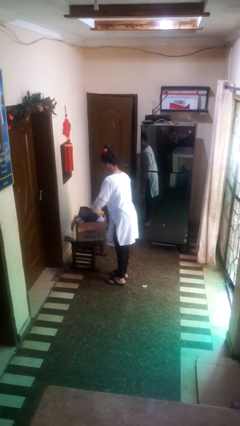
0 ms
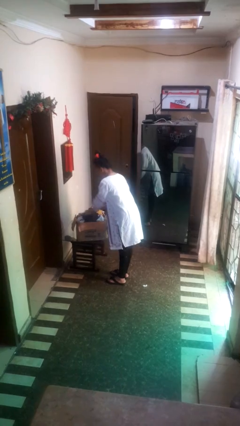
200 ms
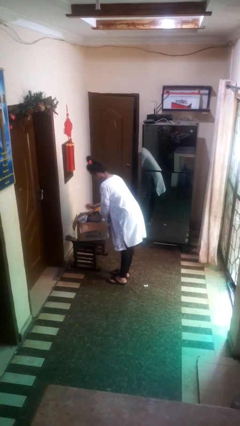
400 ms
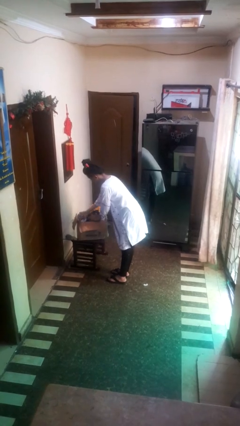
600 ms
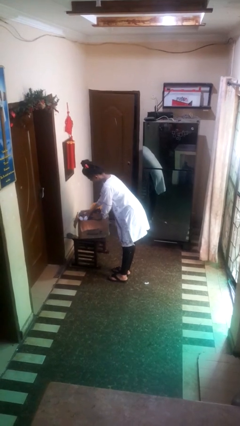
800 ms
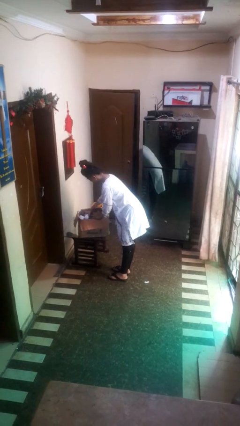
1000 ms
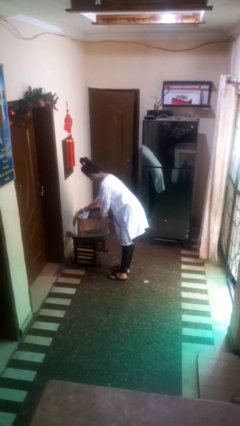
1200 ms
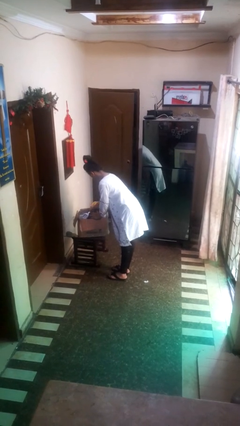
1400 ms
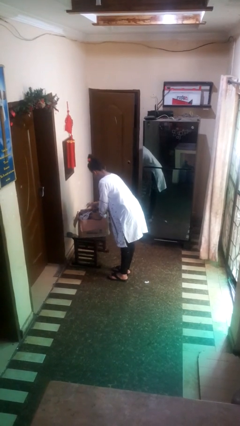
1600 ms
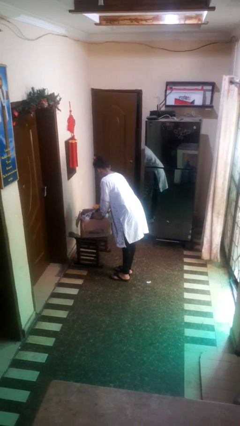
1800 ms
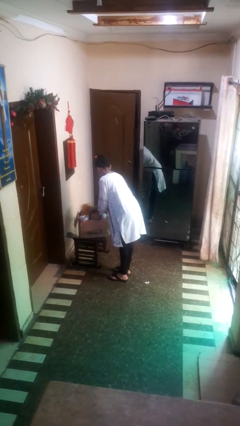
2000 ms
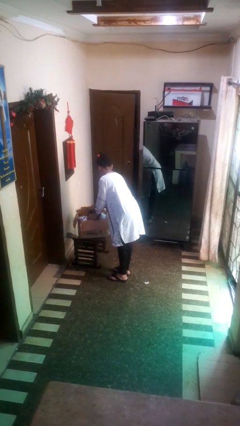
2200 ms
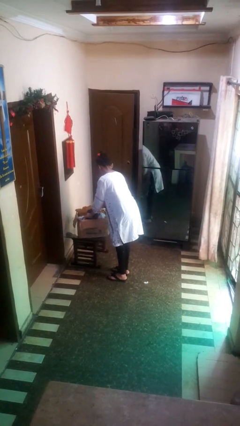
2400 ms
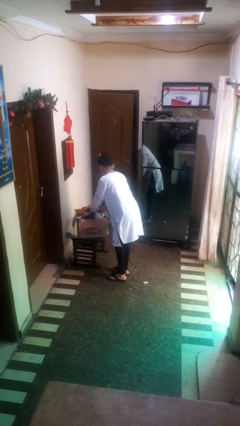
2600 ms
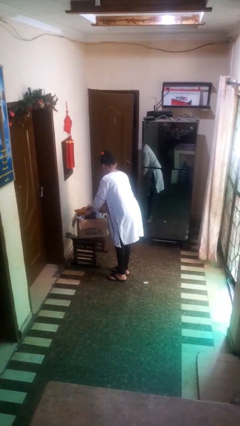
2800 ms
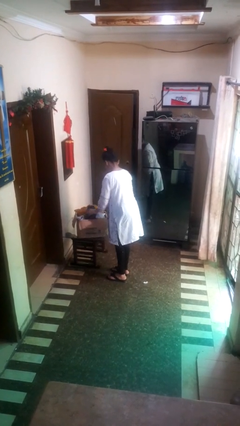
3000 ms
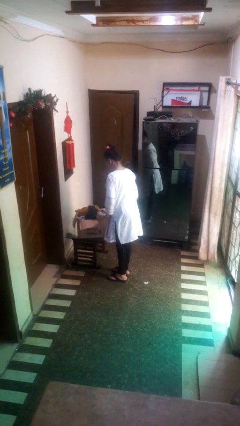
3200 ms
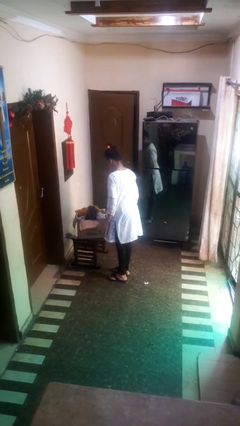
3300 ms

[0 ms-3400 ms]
person searches in box

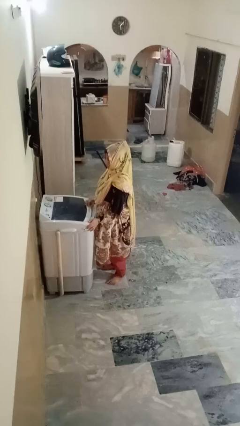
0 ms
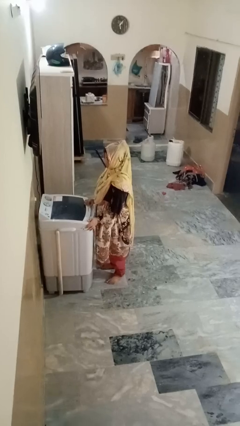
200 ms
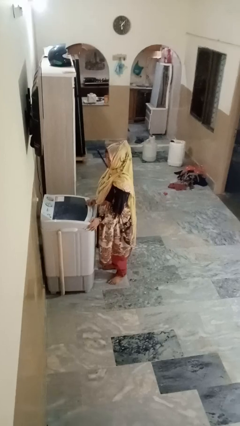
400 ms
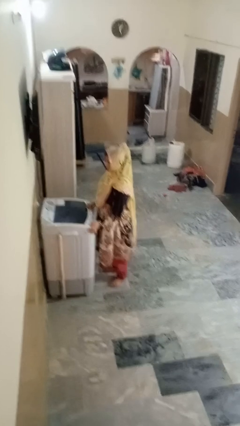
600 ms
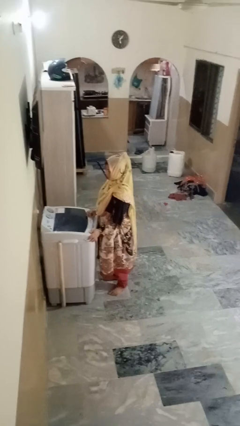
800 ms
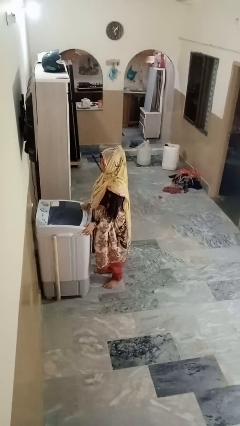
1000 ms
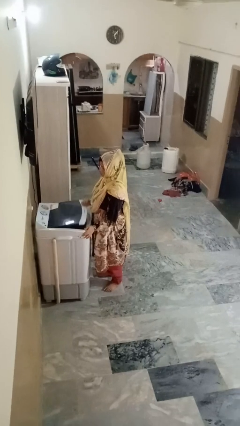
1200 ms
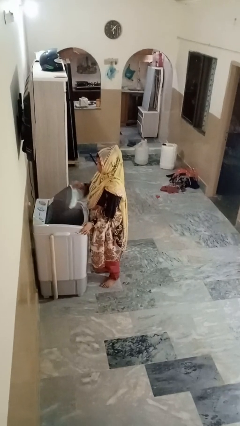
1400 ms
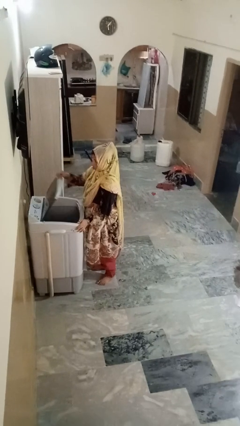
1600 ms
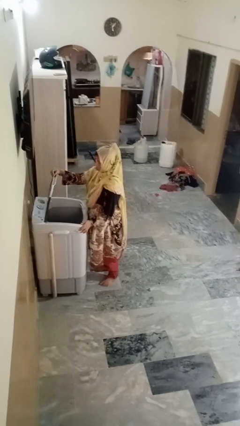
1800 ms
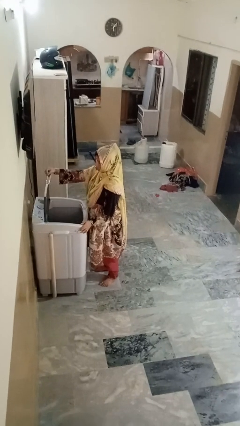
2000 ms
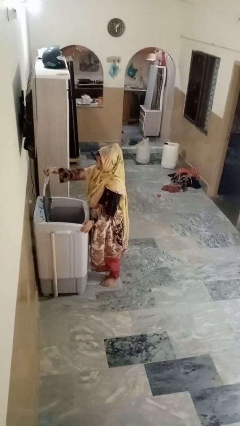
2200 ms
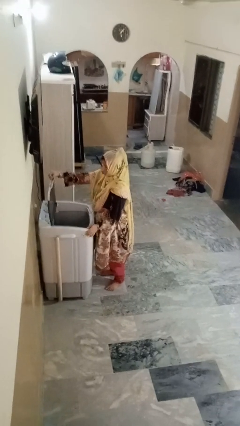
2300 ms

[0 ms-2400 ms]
person closes clothes washer

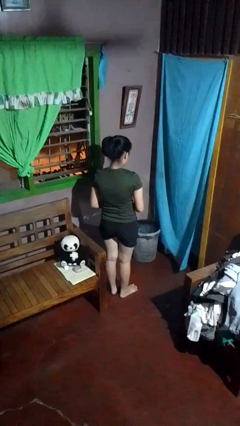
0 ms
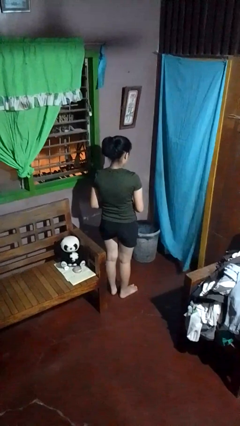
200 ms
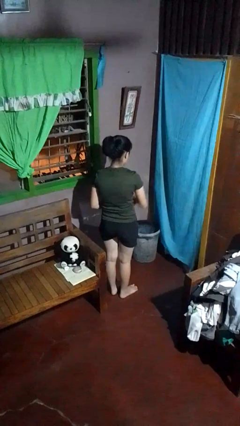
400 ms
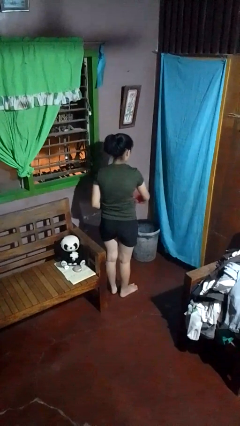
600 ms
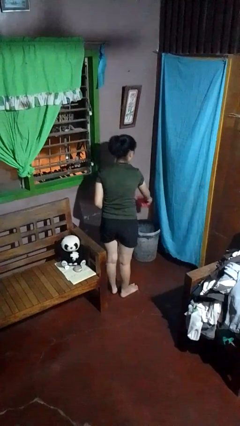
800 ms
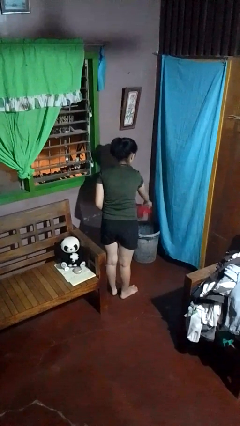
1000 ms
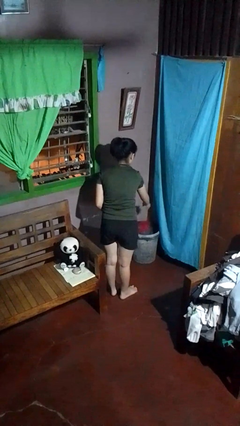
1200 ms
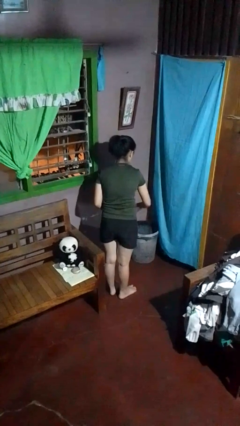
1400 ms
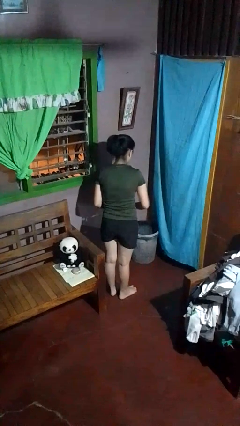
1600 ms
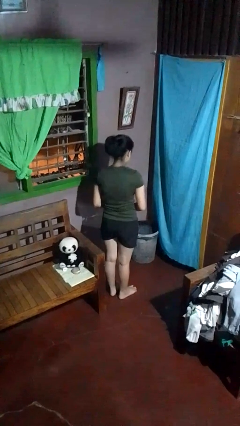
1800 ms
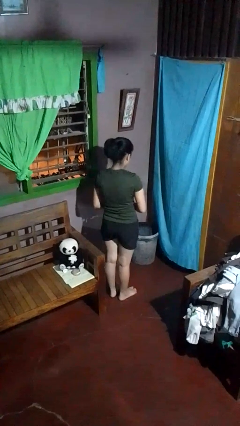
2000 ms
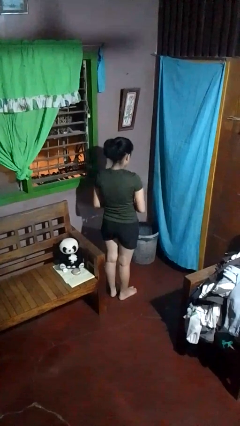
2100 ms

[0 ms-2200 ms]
person discards trash

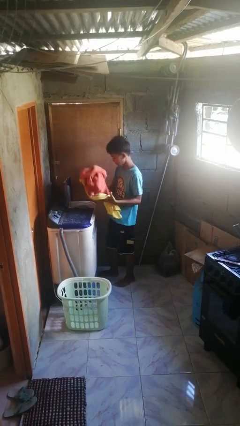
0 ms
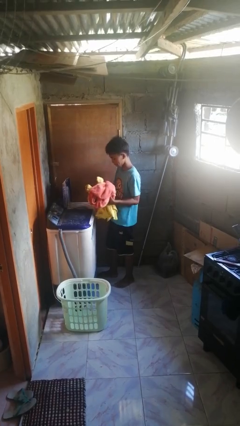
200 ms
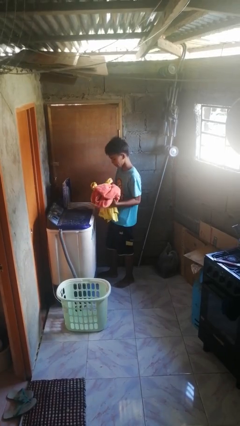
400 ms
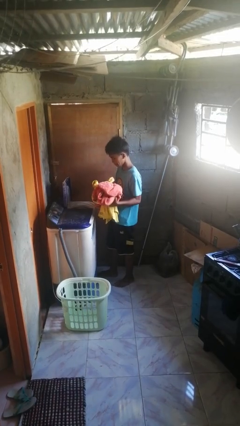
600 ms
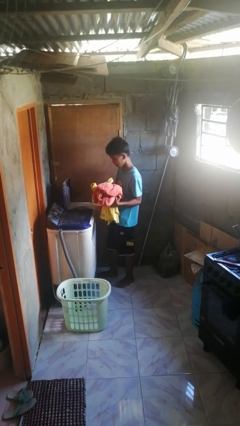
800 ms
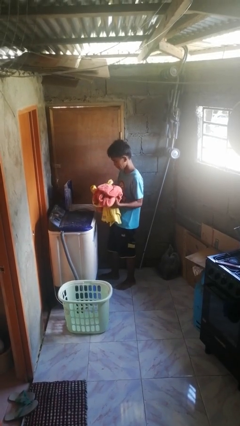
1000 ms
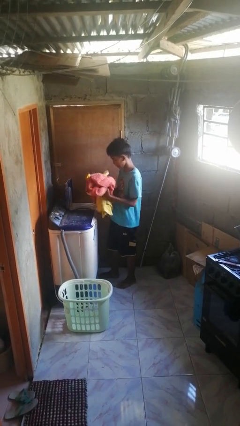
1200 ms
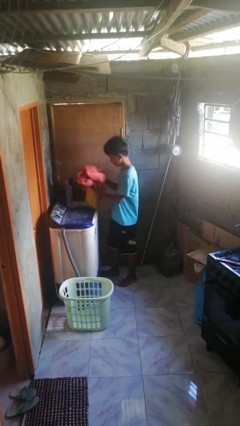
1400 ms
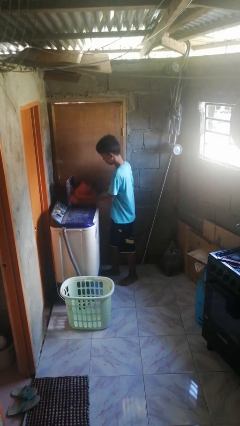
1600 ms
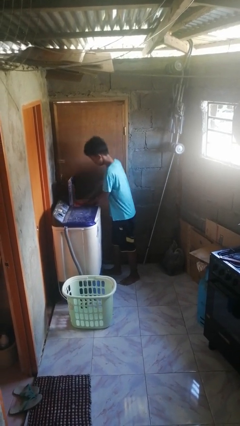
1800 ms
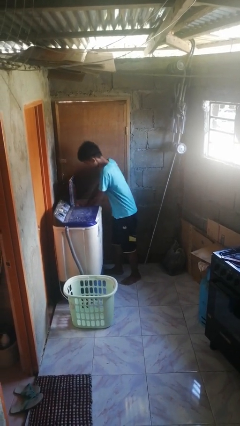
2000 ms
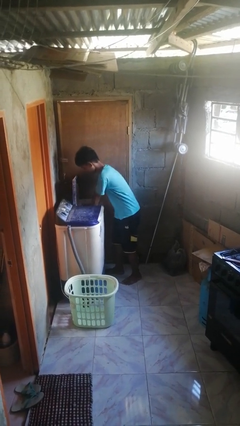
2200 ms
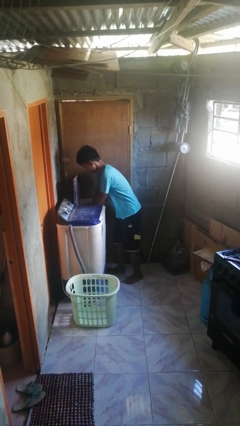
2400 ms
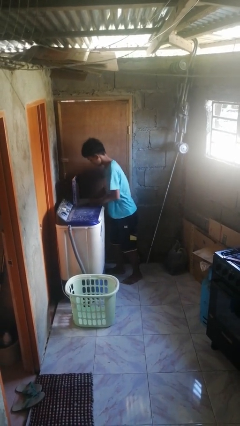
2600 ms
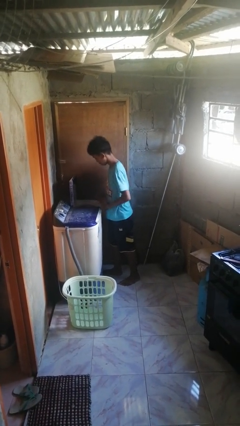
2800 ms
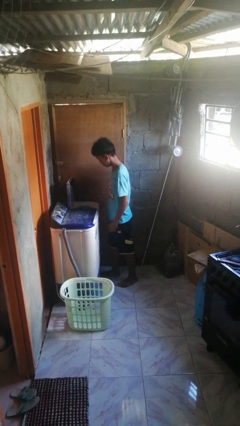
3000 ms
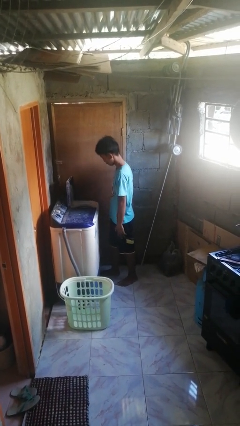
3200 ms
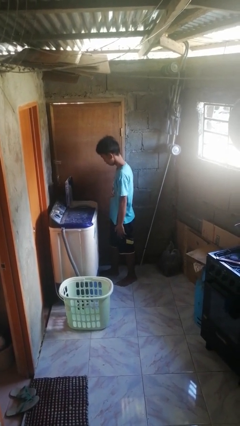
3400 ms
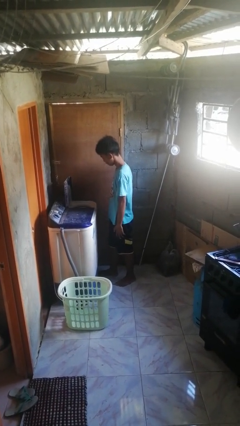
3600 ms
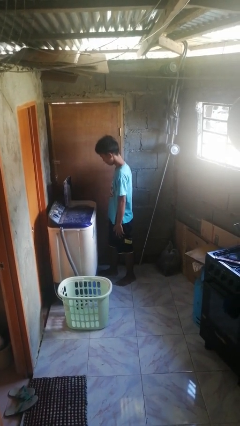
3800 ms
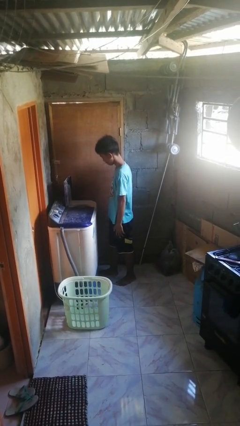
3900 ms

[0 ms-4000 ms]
person loads dryer

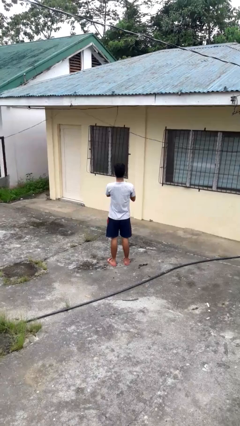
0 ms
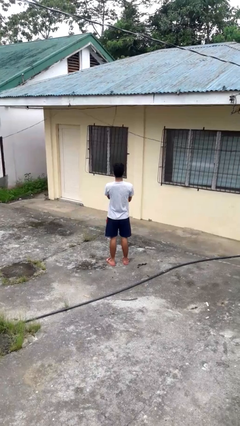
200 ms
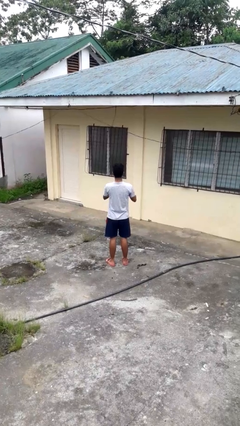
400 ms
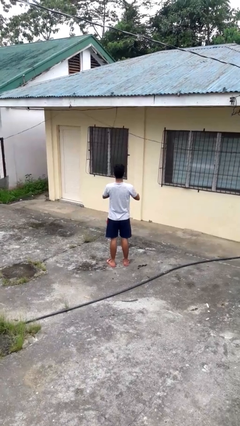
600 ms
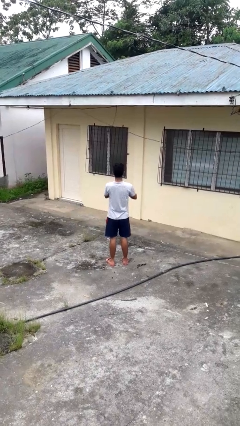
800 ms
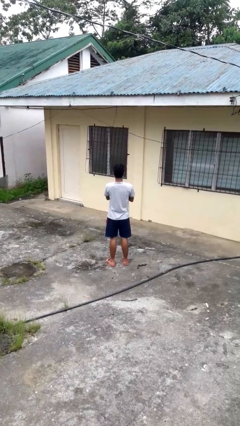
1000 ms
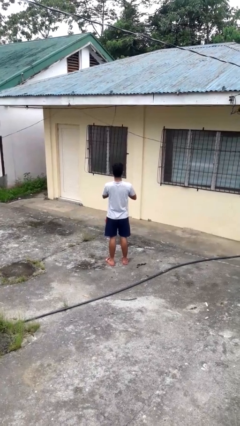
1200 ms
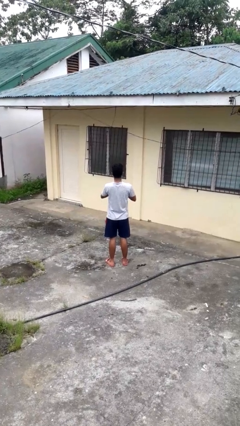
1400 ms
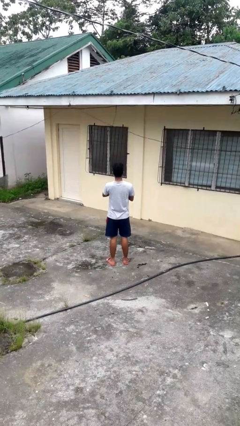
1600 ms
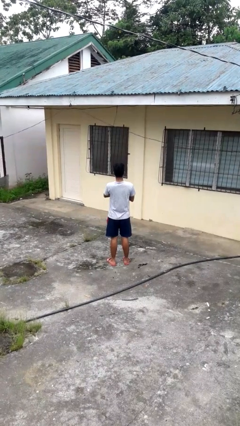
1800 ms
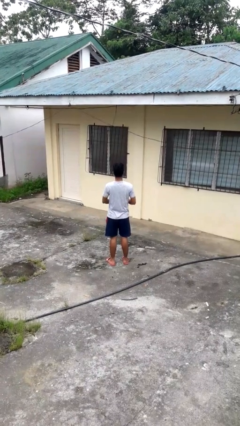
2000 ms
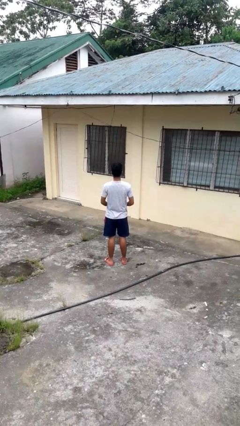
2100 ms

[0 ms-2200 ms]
person cracks knuckles

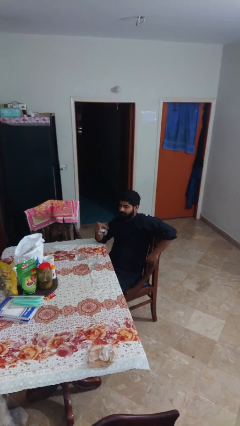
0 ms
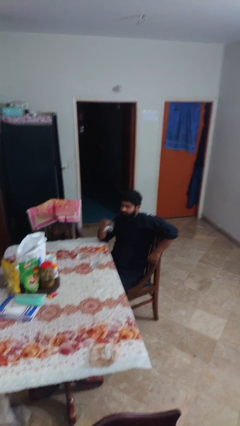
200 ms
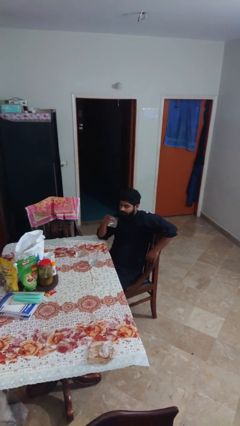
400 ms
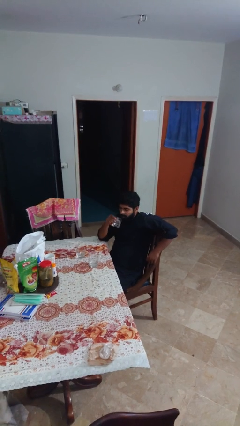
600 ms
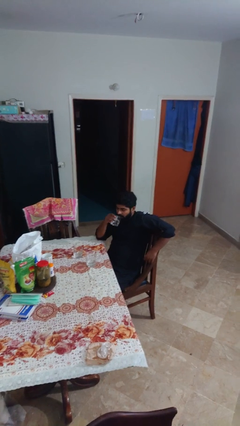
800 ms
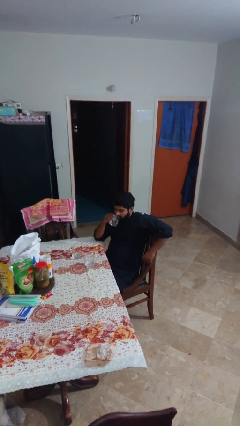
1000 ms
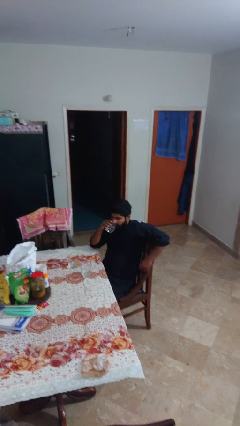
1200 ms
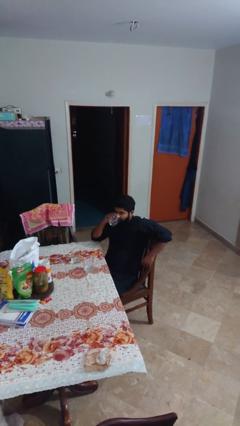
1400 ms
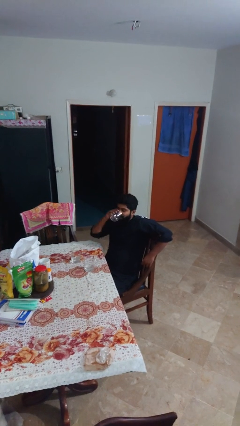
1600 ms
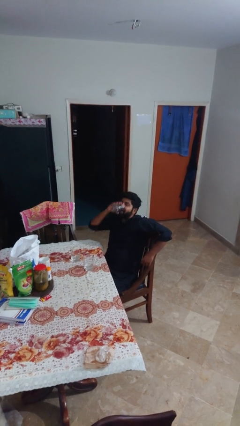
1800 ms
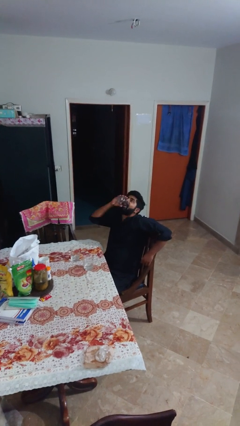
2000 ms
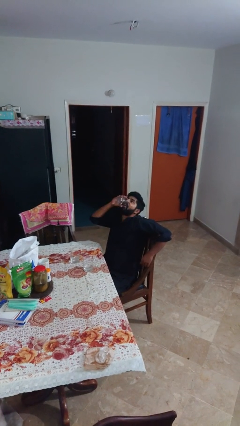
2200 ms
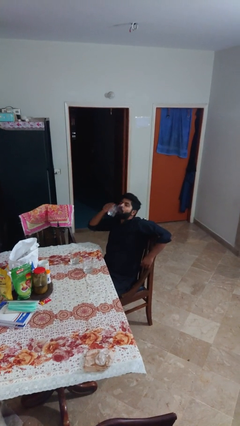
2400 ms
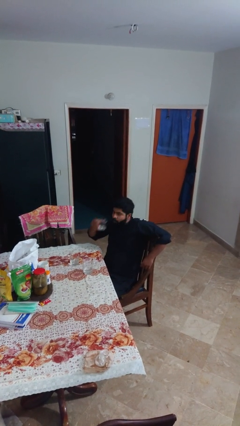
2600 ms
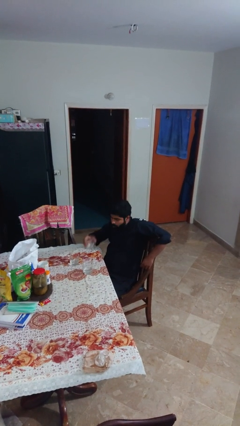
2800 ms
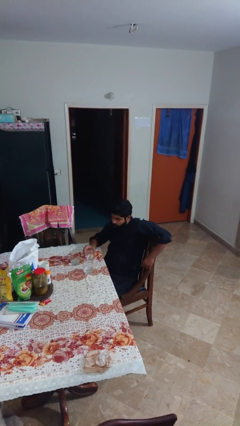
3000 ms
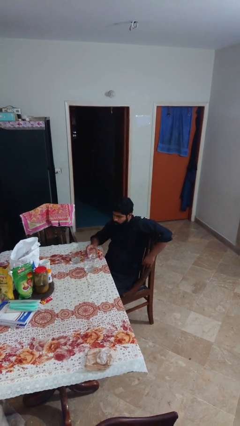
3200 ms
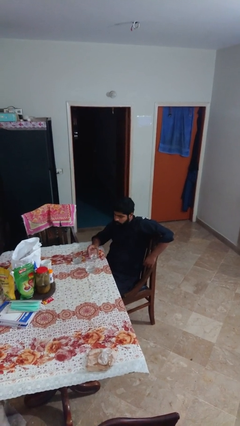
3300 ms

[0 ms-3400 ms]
person drinks from shotglass
